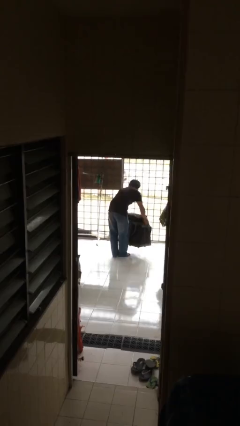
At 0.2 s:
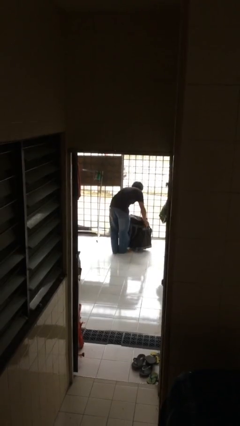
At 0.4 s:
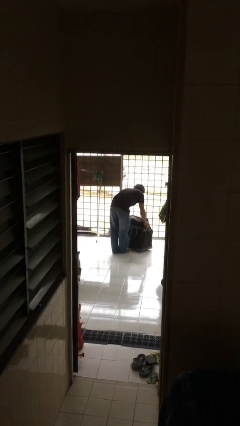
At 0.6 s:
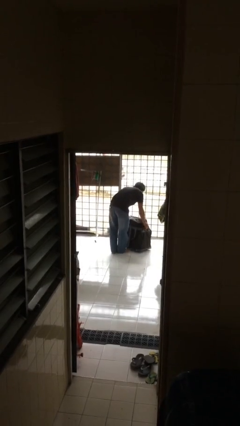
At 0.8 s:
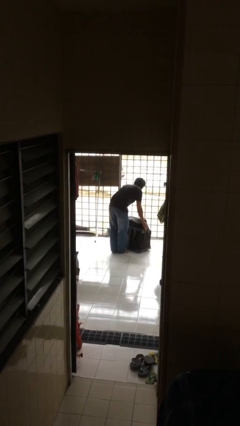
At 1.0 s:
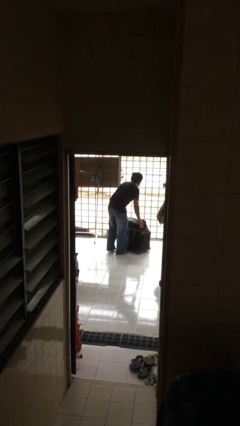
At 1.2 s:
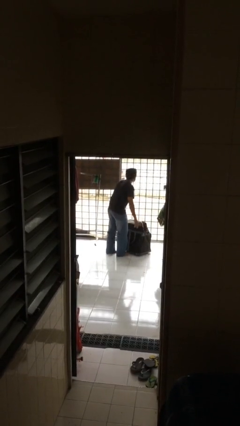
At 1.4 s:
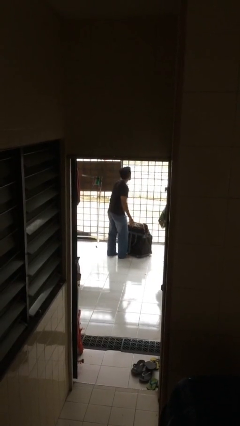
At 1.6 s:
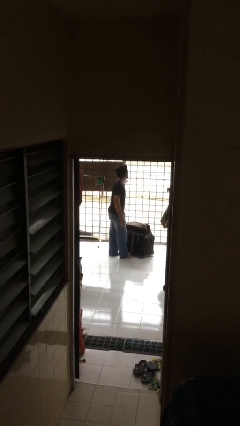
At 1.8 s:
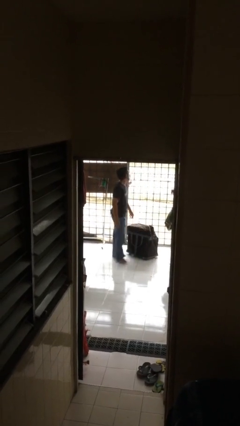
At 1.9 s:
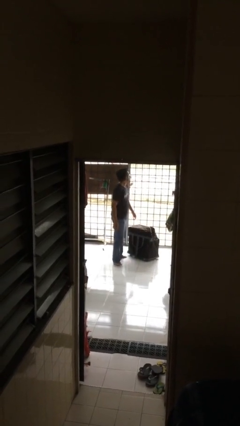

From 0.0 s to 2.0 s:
person puts down object on floor

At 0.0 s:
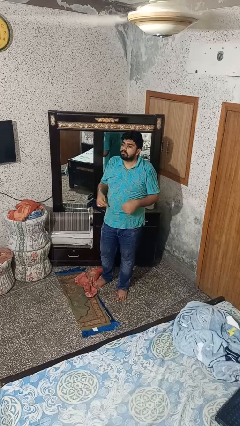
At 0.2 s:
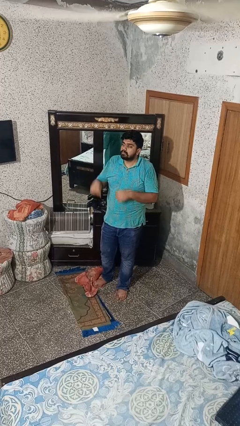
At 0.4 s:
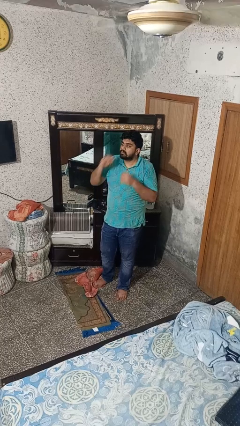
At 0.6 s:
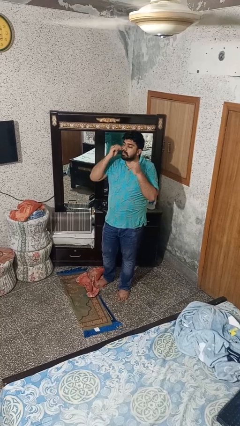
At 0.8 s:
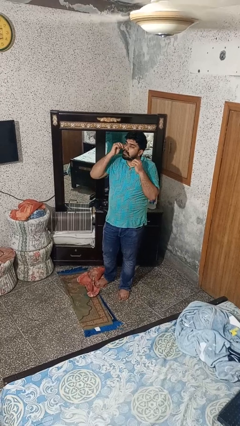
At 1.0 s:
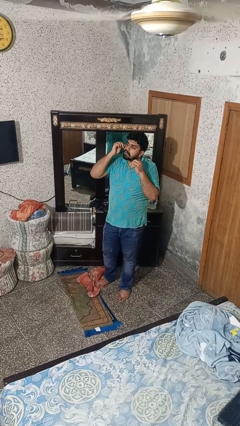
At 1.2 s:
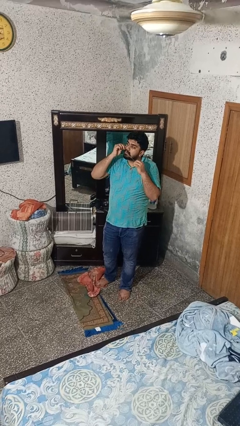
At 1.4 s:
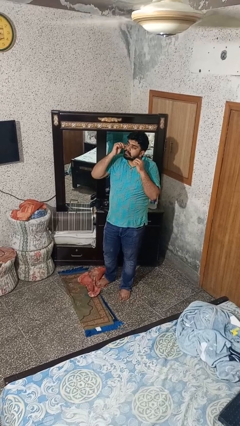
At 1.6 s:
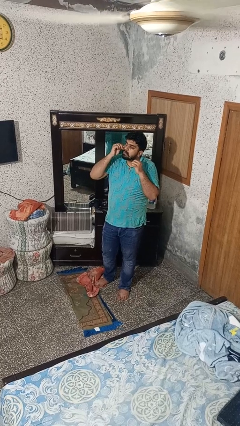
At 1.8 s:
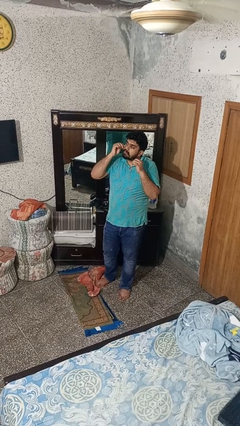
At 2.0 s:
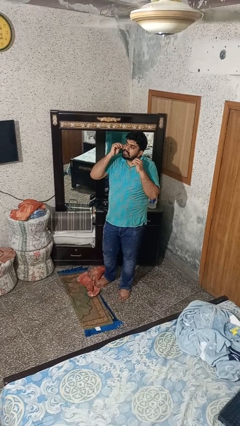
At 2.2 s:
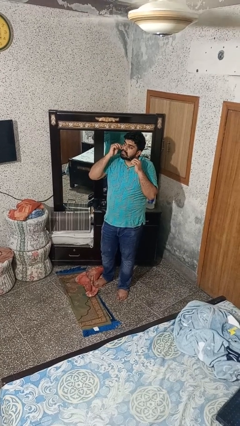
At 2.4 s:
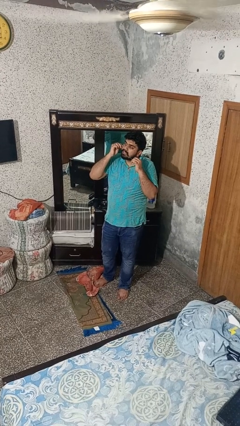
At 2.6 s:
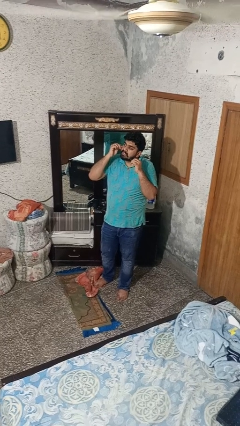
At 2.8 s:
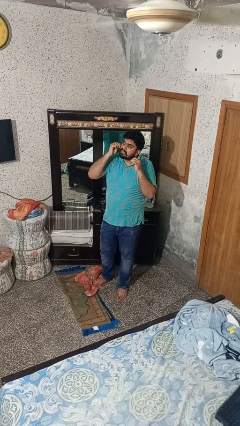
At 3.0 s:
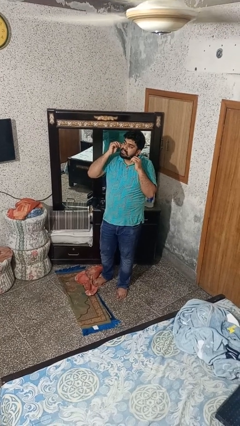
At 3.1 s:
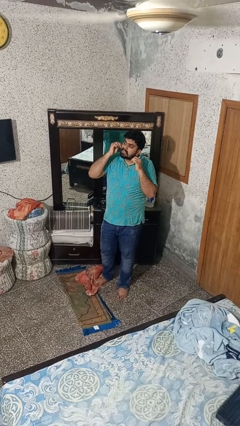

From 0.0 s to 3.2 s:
person flosses

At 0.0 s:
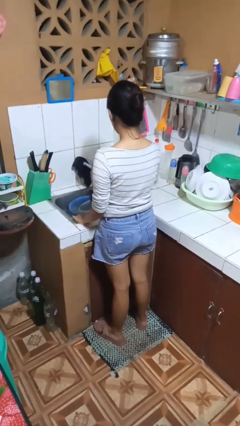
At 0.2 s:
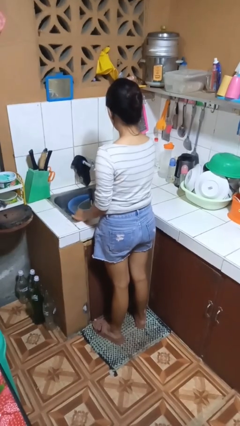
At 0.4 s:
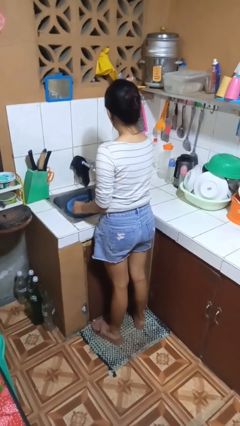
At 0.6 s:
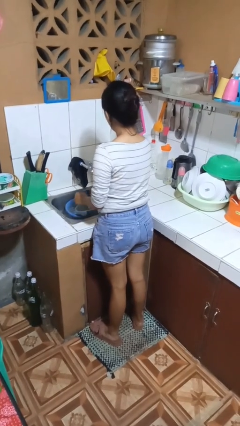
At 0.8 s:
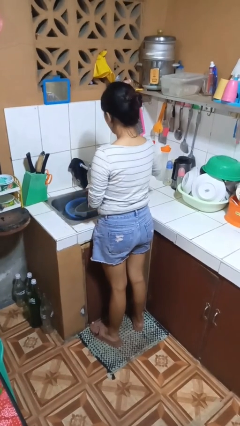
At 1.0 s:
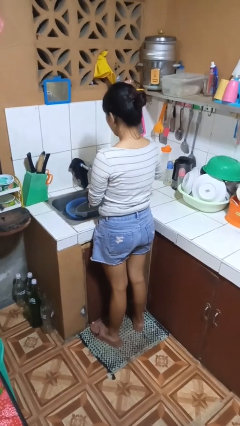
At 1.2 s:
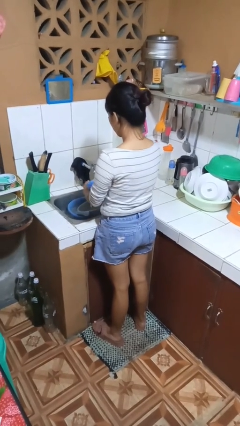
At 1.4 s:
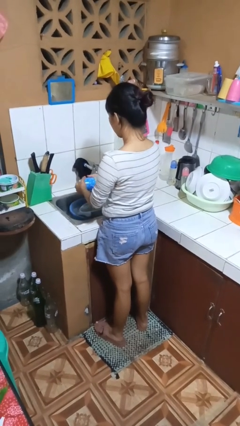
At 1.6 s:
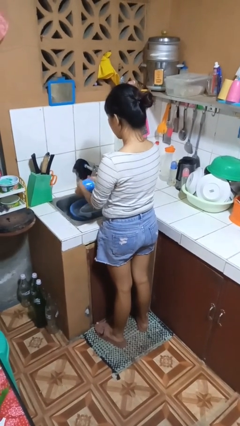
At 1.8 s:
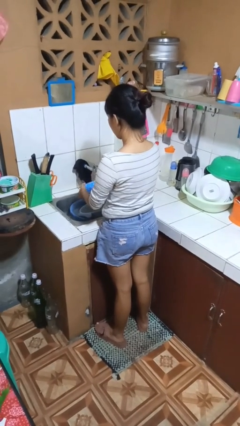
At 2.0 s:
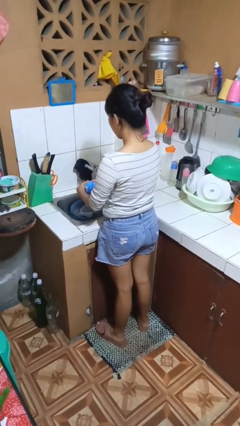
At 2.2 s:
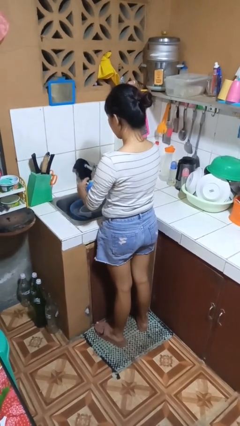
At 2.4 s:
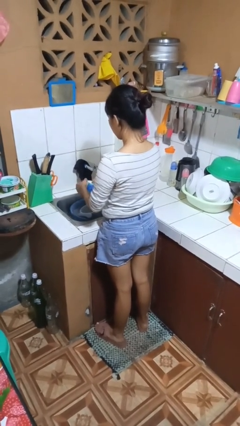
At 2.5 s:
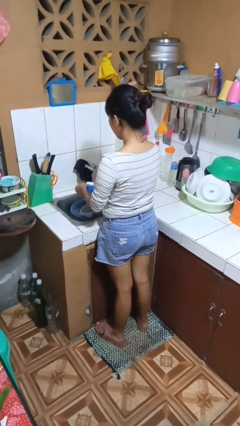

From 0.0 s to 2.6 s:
person washes dish

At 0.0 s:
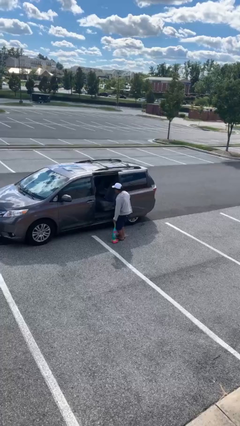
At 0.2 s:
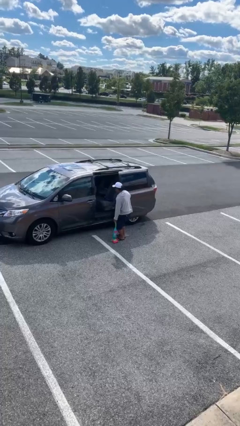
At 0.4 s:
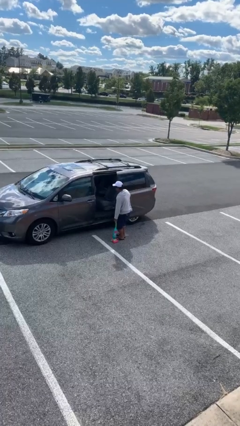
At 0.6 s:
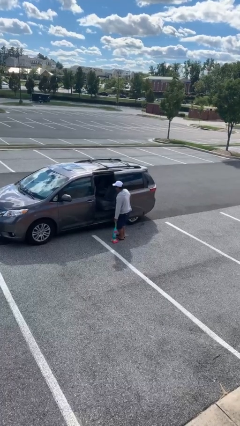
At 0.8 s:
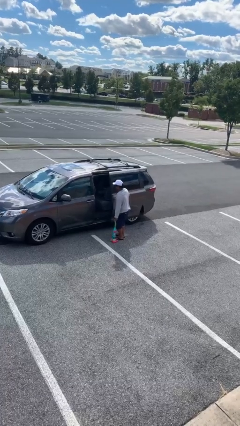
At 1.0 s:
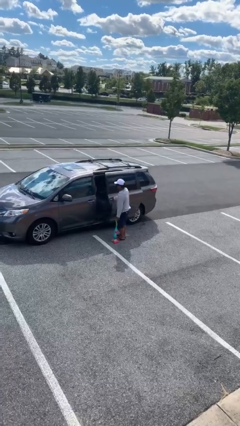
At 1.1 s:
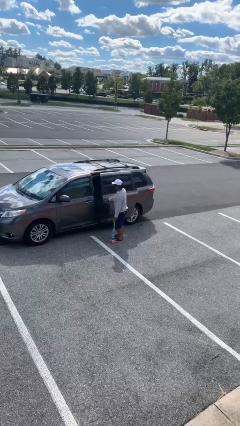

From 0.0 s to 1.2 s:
person closes car door

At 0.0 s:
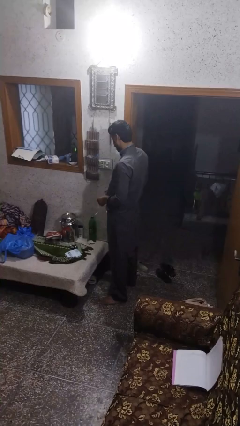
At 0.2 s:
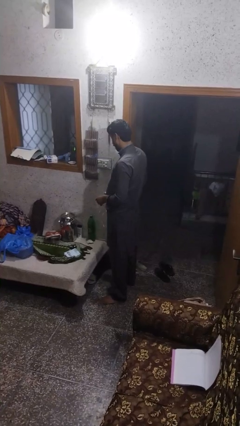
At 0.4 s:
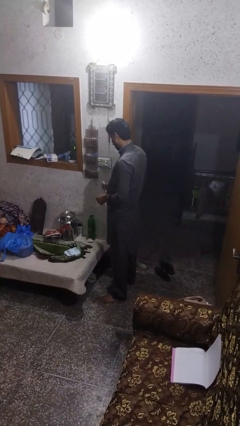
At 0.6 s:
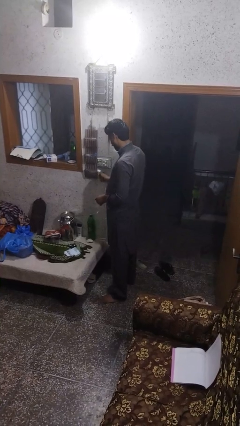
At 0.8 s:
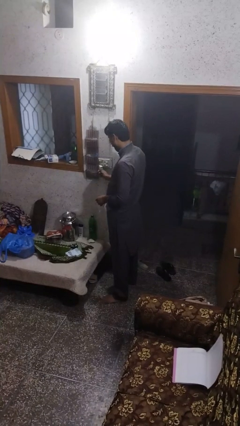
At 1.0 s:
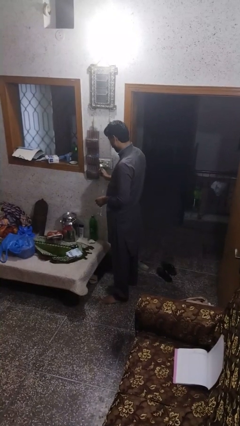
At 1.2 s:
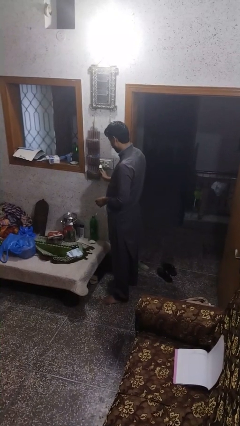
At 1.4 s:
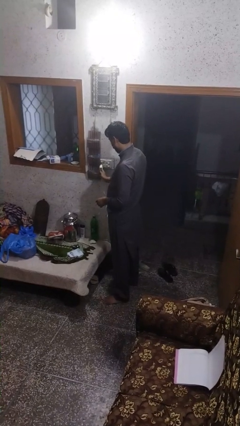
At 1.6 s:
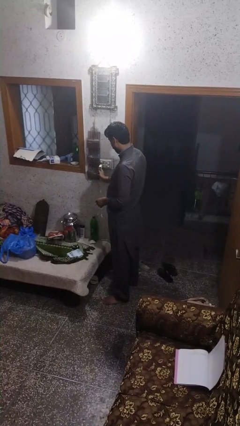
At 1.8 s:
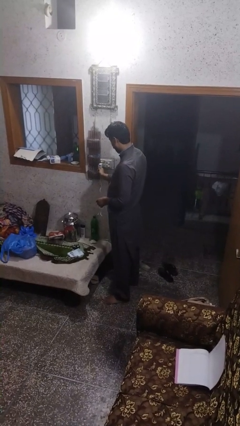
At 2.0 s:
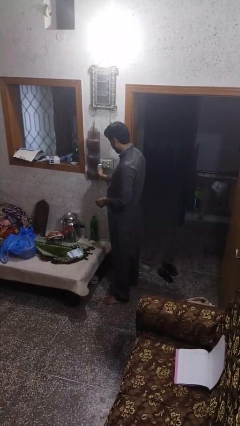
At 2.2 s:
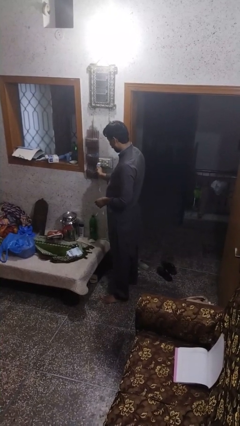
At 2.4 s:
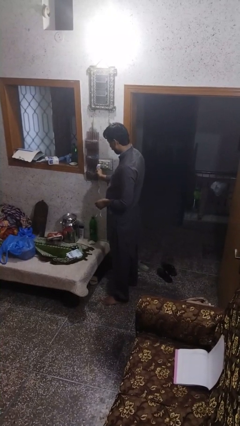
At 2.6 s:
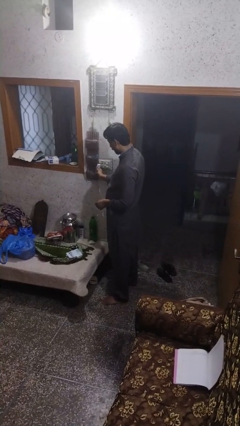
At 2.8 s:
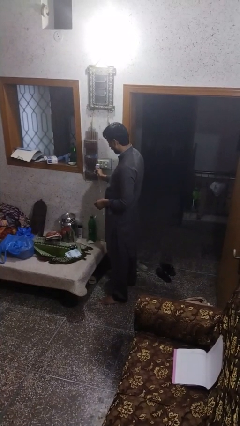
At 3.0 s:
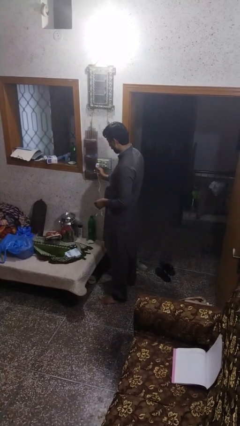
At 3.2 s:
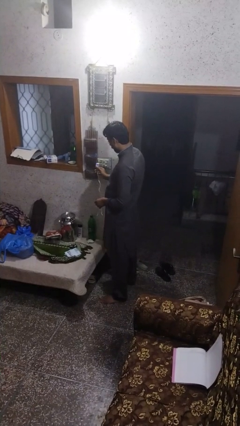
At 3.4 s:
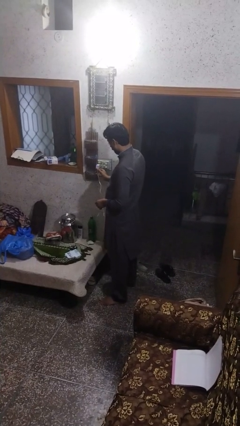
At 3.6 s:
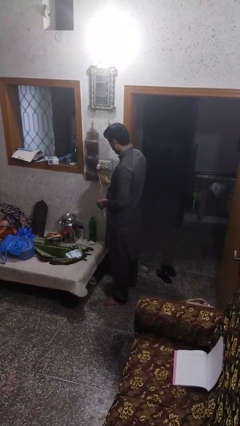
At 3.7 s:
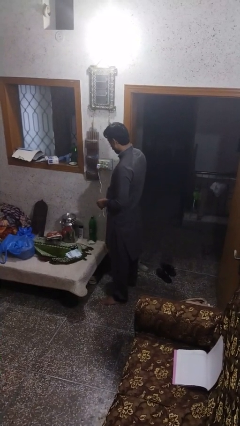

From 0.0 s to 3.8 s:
person plugs into electrical socket

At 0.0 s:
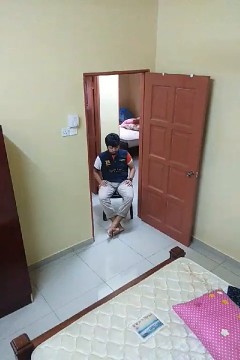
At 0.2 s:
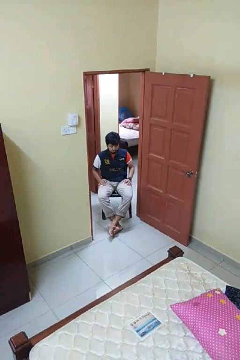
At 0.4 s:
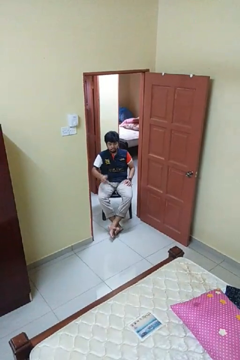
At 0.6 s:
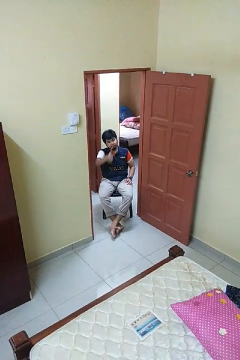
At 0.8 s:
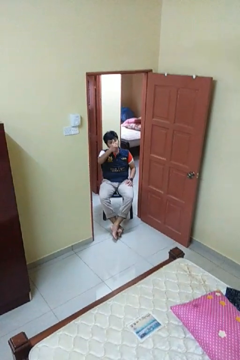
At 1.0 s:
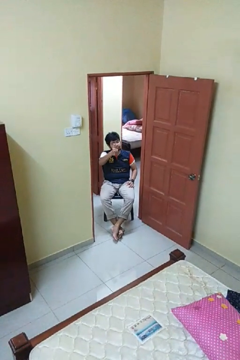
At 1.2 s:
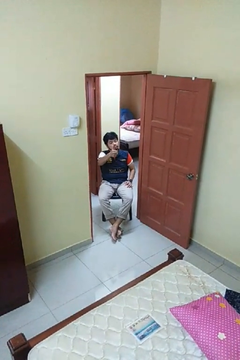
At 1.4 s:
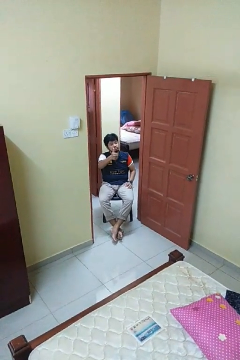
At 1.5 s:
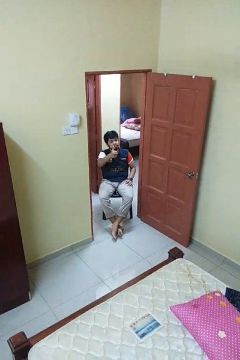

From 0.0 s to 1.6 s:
person gestures thumbs up

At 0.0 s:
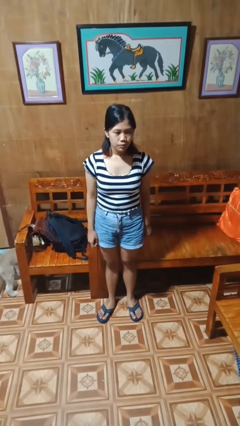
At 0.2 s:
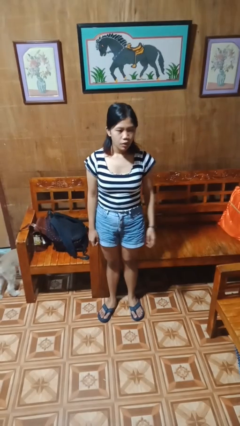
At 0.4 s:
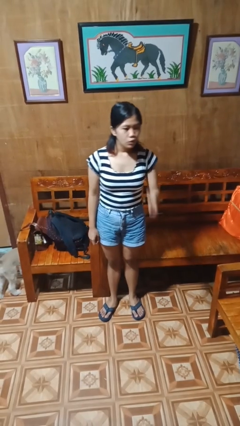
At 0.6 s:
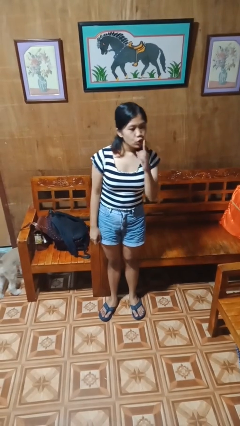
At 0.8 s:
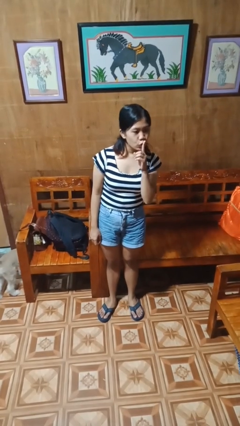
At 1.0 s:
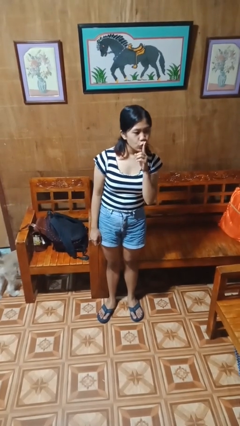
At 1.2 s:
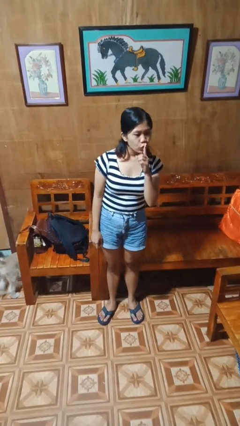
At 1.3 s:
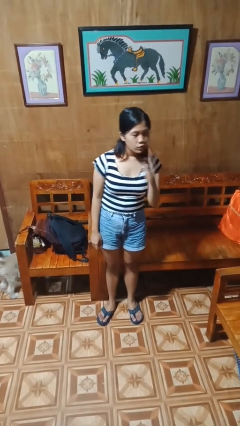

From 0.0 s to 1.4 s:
person gestures be quiet

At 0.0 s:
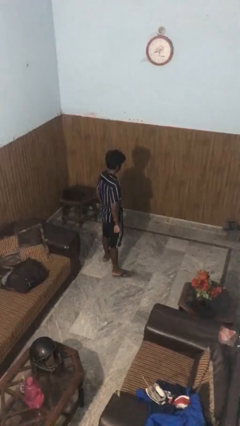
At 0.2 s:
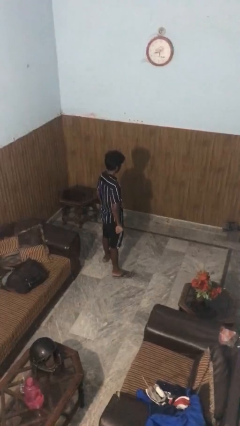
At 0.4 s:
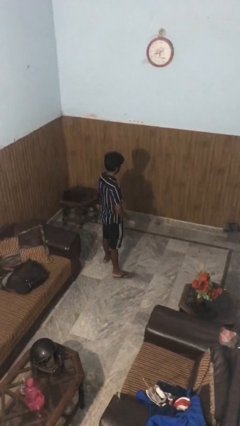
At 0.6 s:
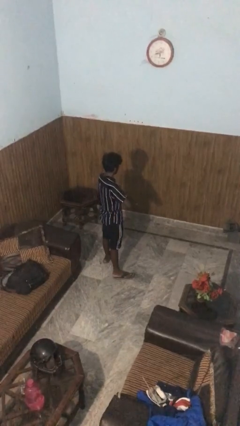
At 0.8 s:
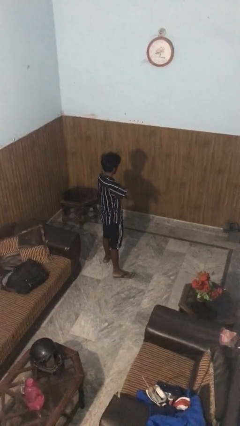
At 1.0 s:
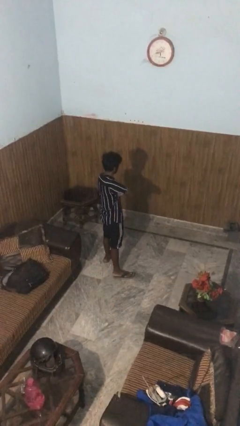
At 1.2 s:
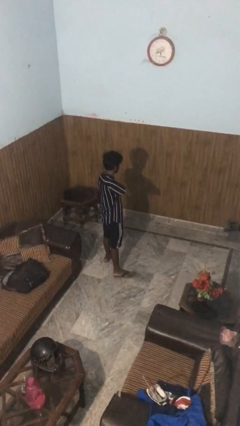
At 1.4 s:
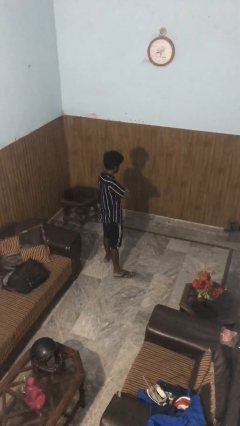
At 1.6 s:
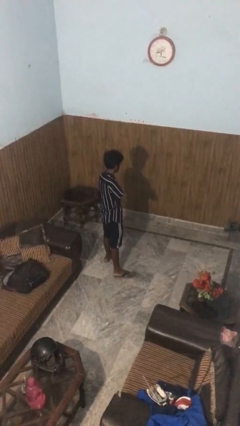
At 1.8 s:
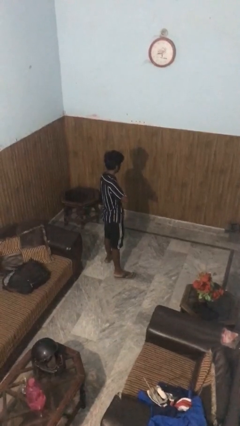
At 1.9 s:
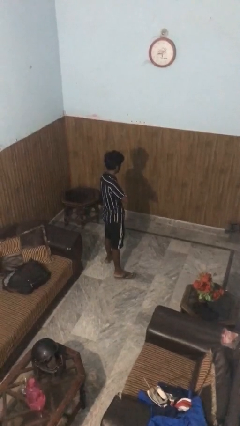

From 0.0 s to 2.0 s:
person crosses arms
